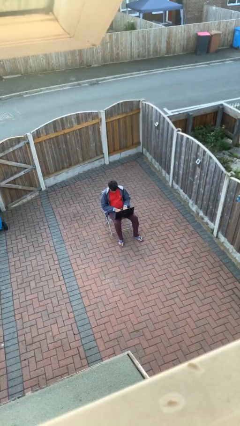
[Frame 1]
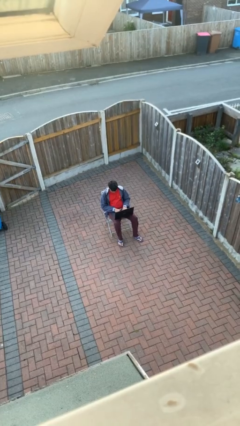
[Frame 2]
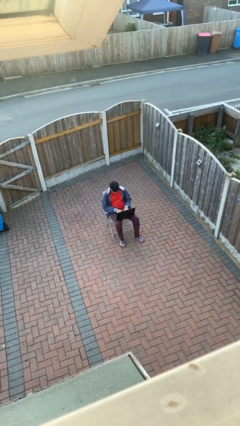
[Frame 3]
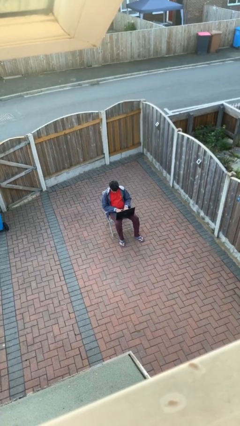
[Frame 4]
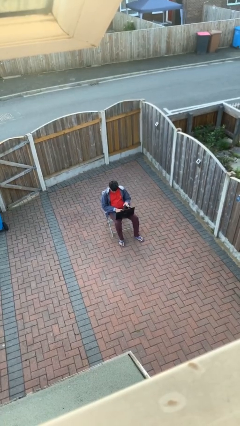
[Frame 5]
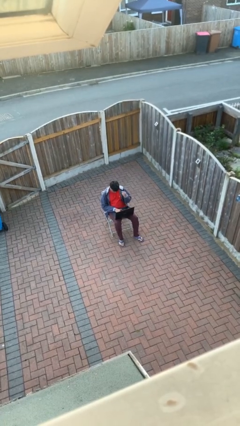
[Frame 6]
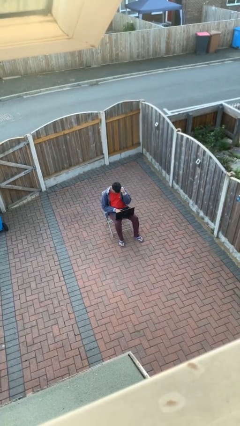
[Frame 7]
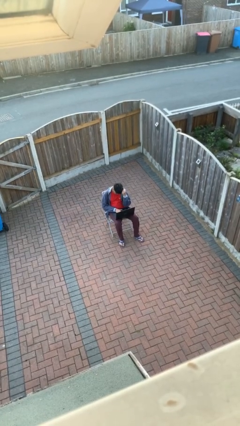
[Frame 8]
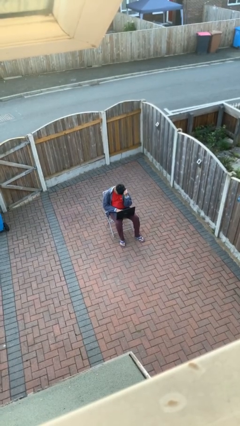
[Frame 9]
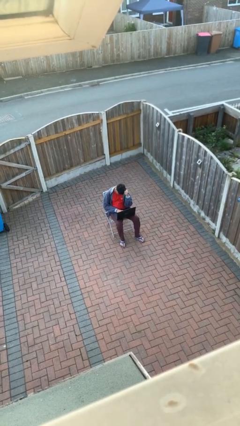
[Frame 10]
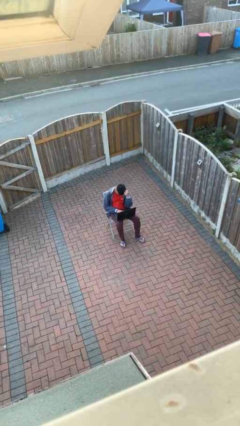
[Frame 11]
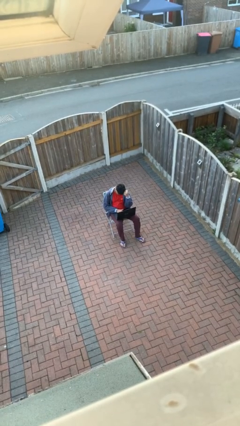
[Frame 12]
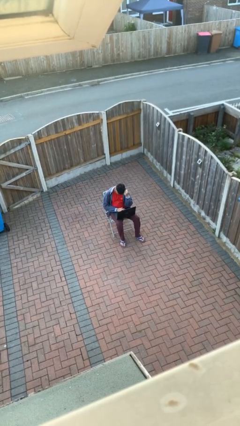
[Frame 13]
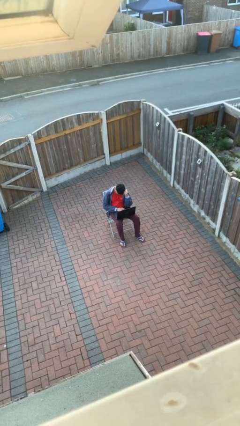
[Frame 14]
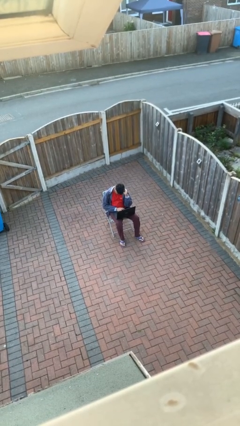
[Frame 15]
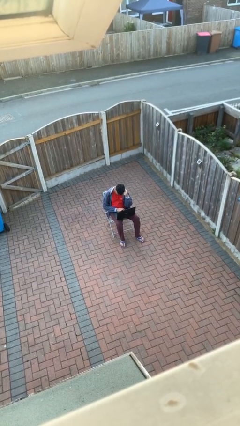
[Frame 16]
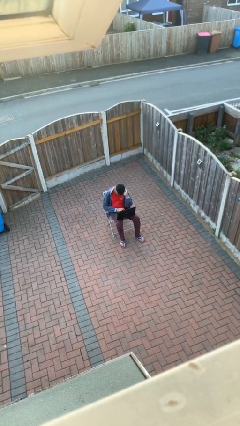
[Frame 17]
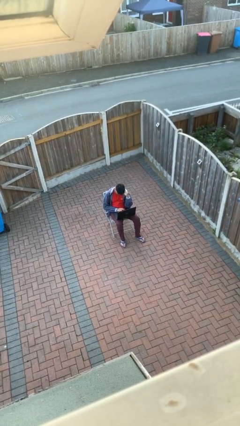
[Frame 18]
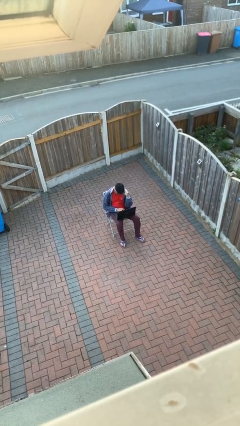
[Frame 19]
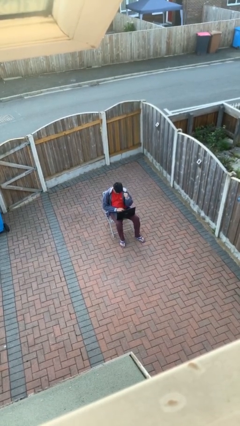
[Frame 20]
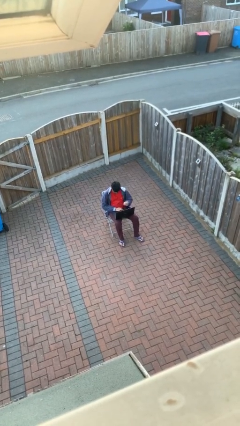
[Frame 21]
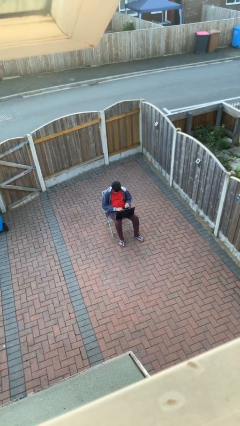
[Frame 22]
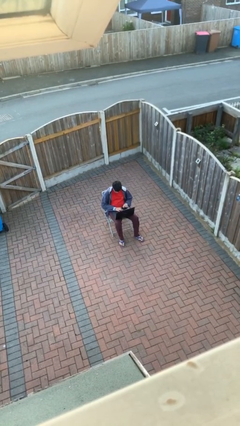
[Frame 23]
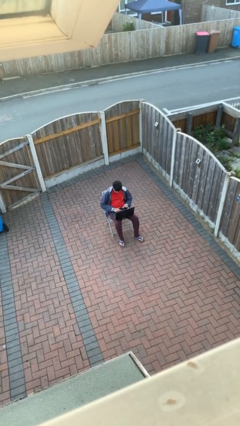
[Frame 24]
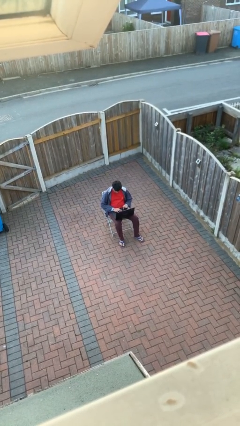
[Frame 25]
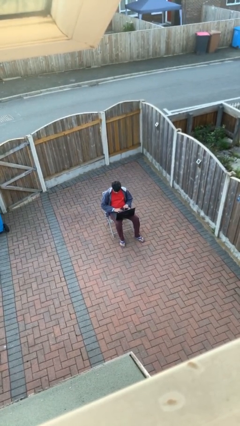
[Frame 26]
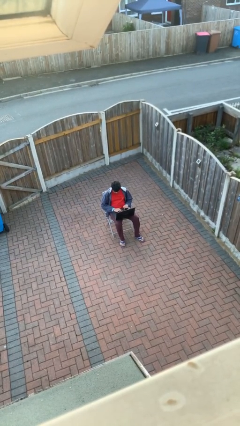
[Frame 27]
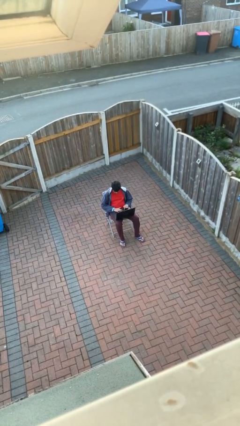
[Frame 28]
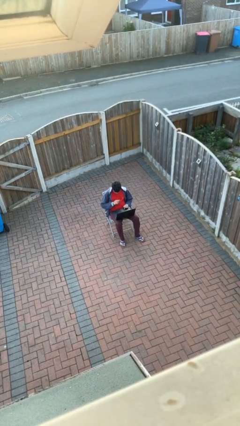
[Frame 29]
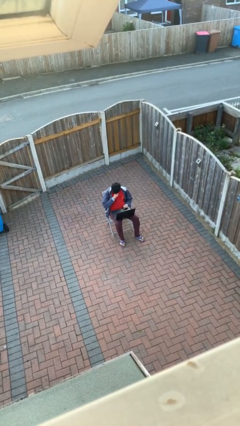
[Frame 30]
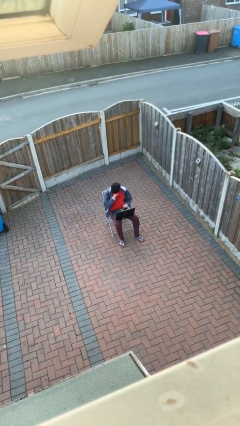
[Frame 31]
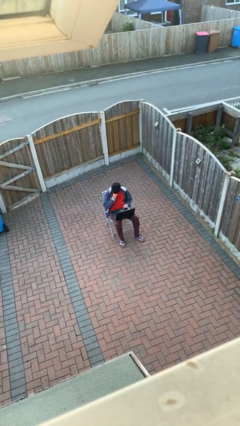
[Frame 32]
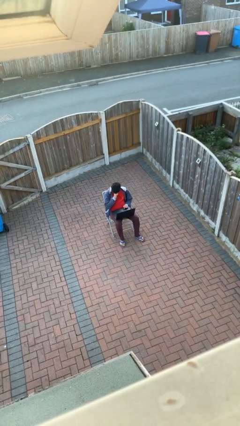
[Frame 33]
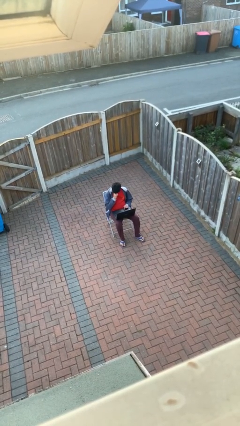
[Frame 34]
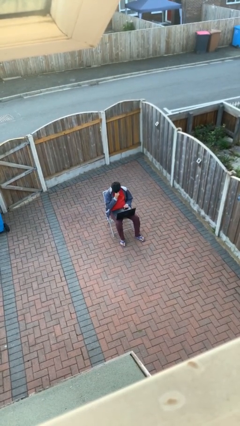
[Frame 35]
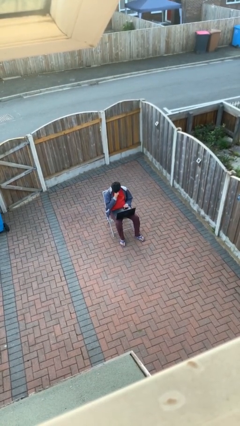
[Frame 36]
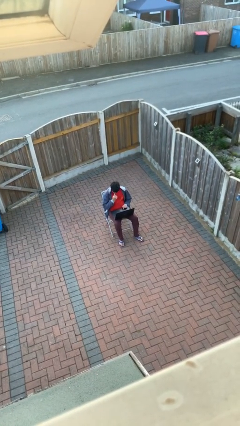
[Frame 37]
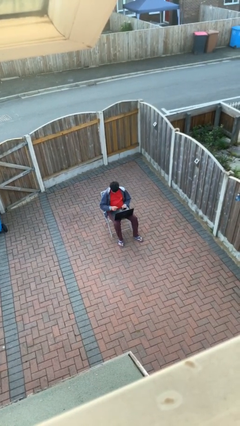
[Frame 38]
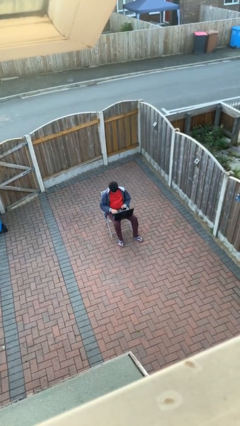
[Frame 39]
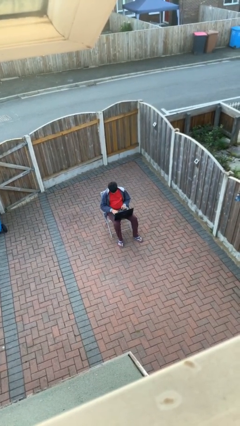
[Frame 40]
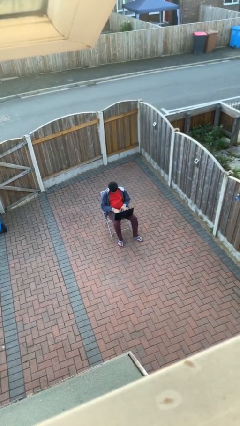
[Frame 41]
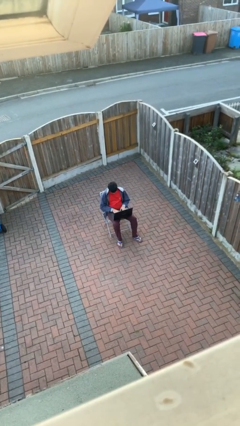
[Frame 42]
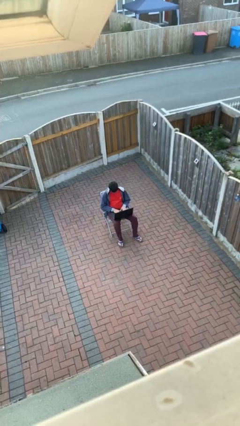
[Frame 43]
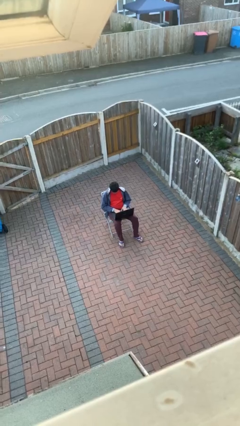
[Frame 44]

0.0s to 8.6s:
person interacts with laptop

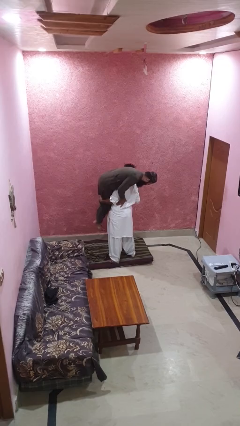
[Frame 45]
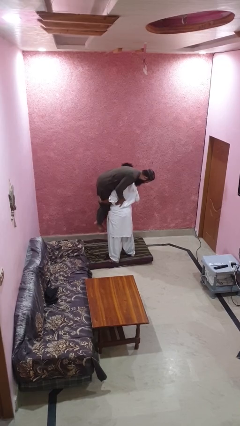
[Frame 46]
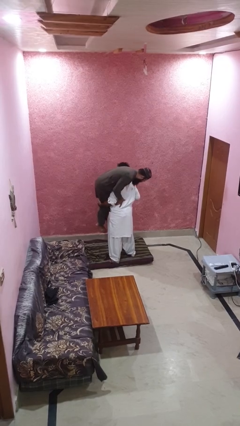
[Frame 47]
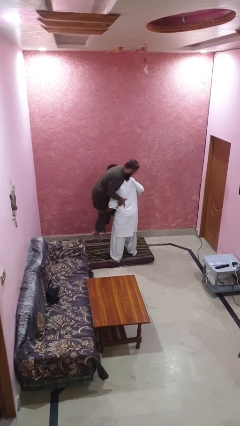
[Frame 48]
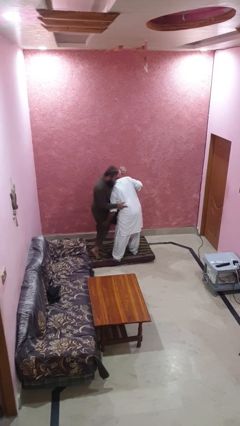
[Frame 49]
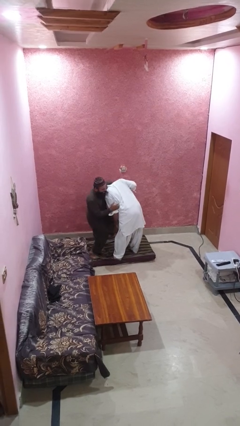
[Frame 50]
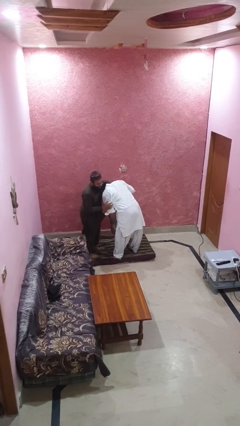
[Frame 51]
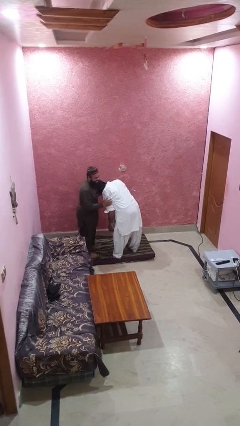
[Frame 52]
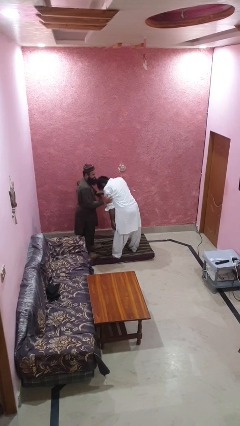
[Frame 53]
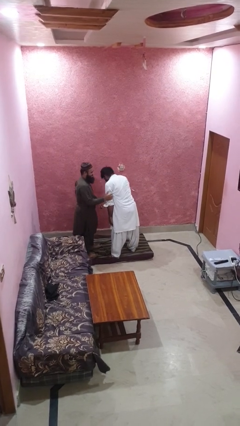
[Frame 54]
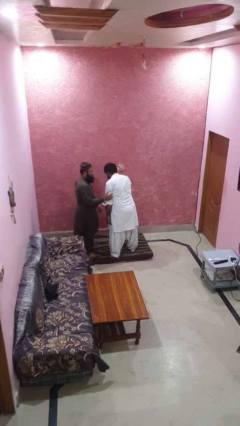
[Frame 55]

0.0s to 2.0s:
person puts down person

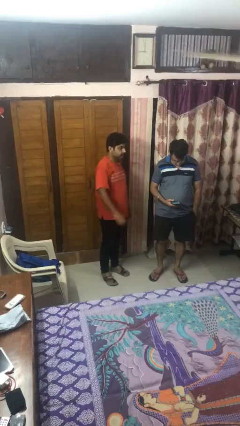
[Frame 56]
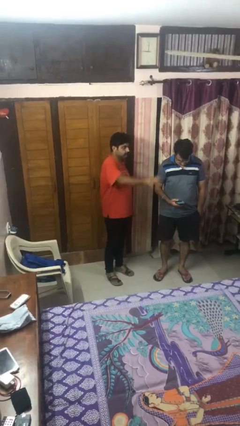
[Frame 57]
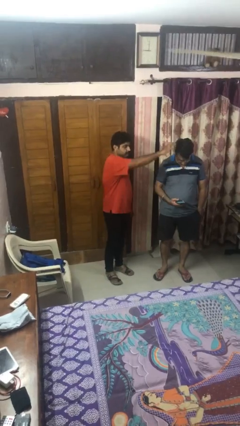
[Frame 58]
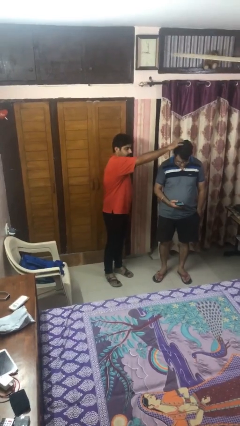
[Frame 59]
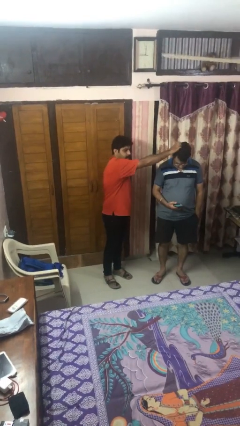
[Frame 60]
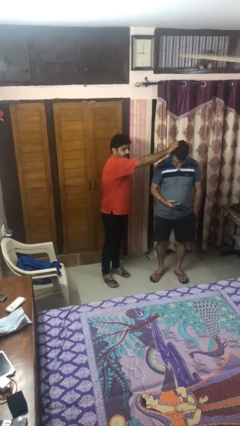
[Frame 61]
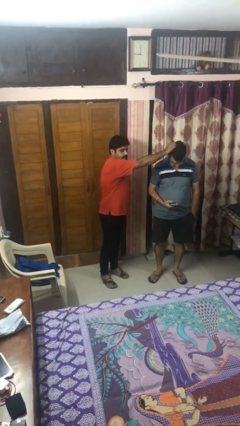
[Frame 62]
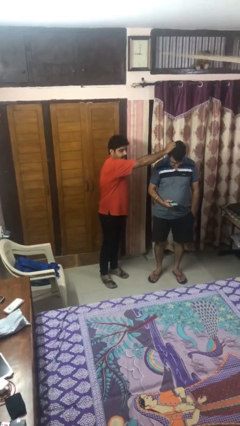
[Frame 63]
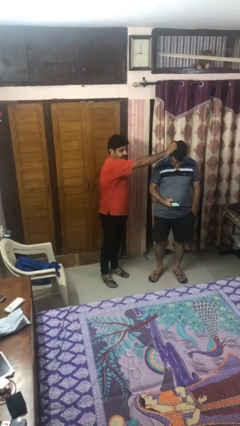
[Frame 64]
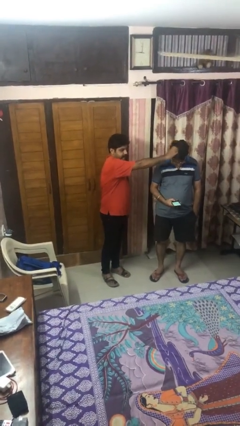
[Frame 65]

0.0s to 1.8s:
person grabs person by hair

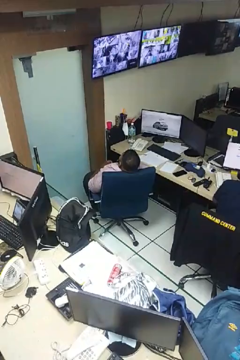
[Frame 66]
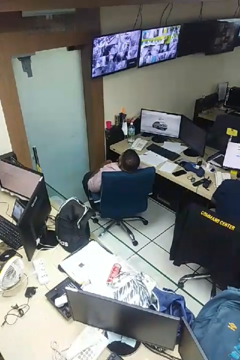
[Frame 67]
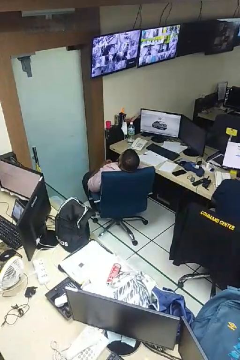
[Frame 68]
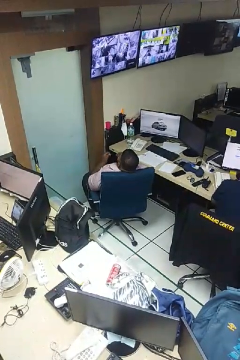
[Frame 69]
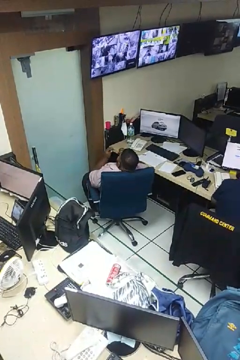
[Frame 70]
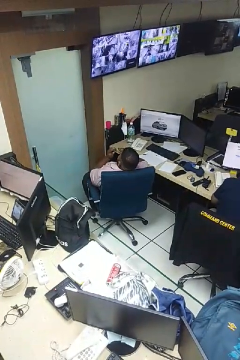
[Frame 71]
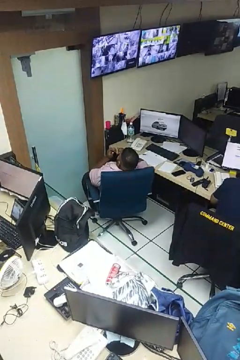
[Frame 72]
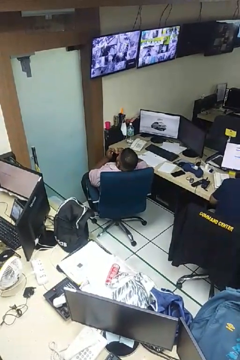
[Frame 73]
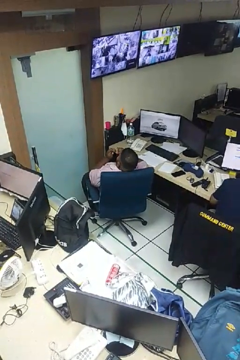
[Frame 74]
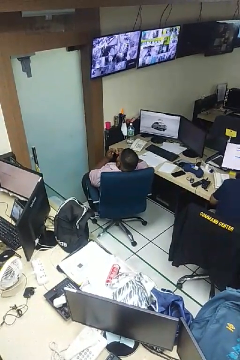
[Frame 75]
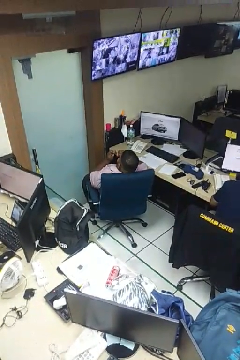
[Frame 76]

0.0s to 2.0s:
person files fingernails

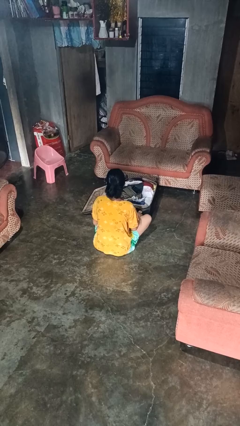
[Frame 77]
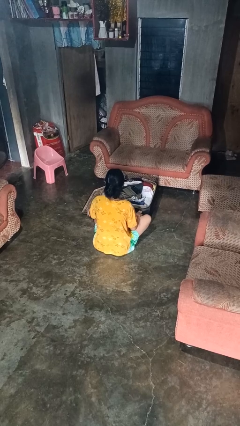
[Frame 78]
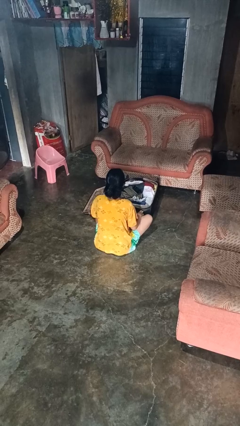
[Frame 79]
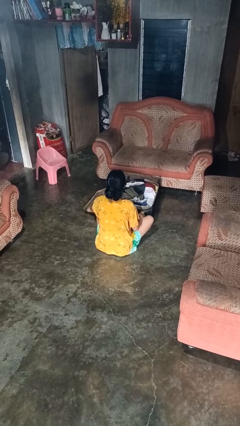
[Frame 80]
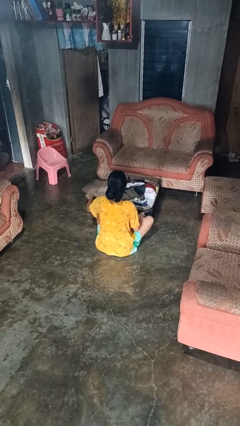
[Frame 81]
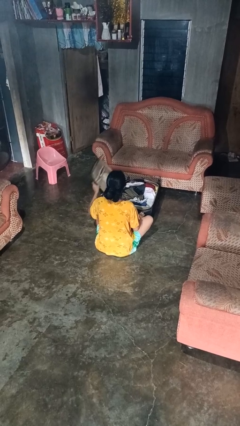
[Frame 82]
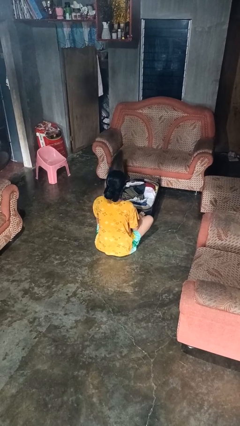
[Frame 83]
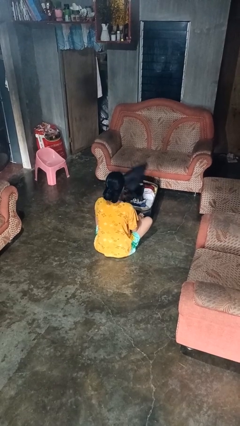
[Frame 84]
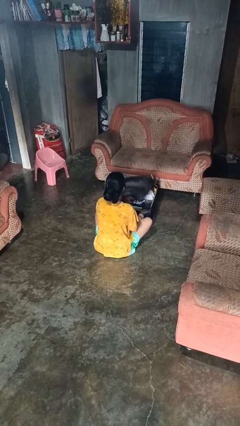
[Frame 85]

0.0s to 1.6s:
person closes suitcase

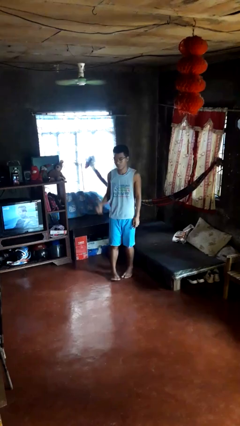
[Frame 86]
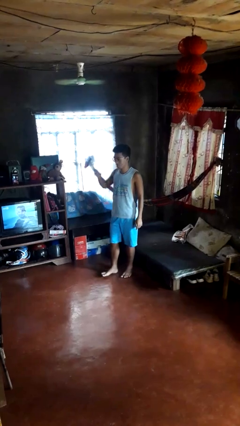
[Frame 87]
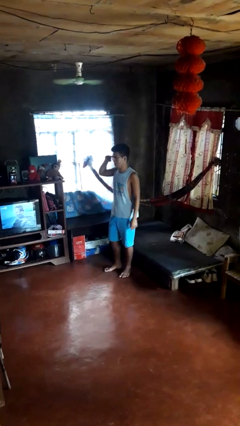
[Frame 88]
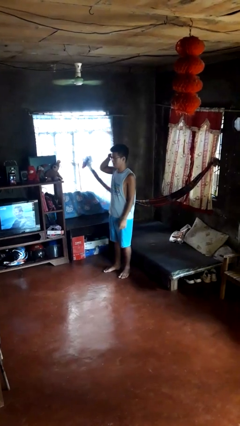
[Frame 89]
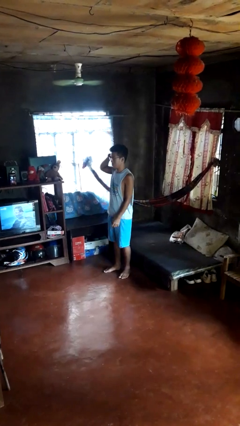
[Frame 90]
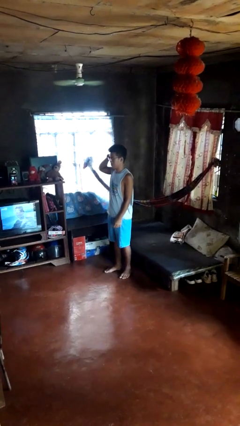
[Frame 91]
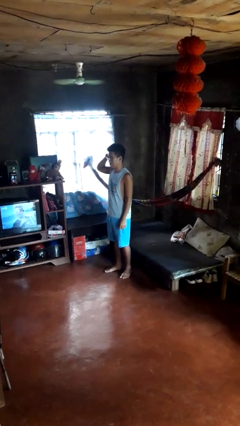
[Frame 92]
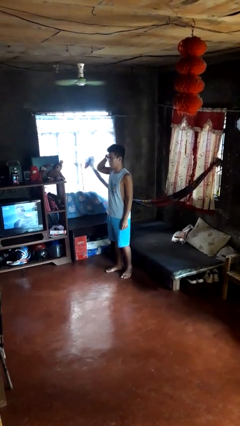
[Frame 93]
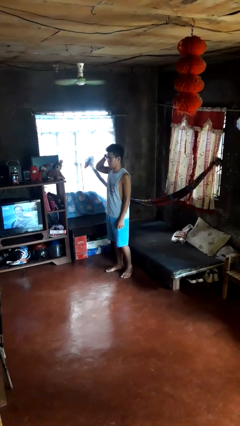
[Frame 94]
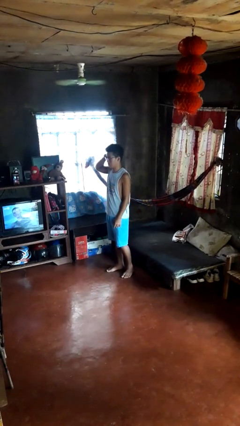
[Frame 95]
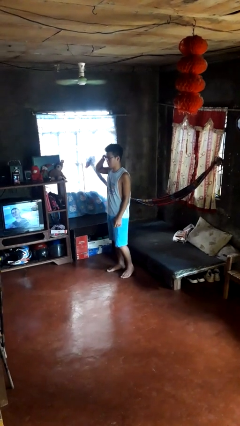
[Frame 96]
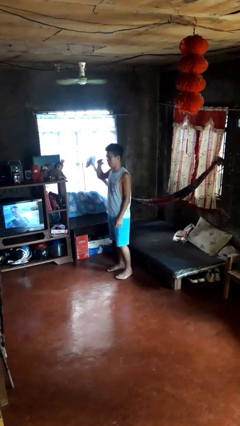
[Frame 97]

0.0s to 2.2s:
person gestures listen closely
